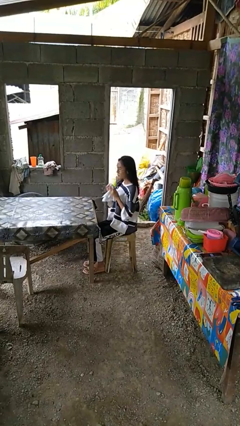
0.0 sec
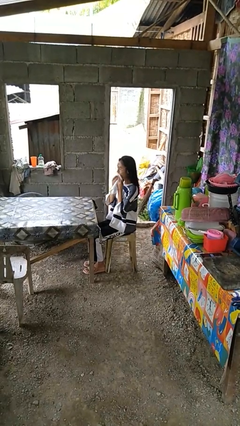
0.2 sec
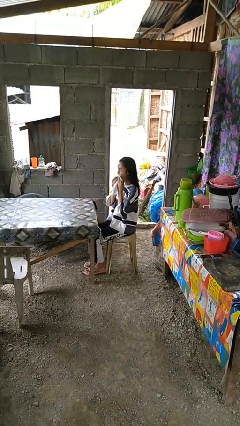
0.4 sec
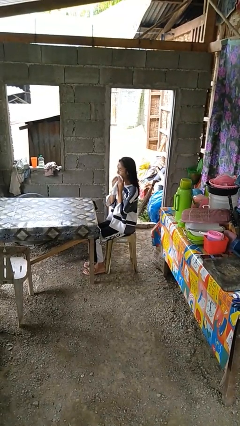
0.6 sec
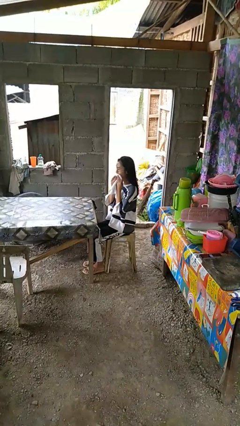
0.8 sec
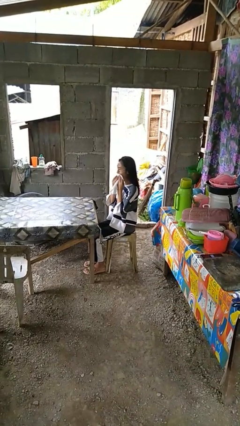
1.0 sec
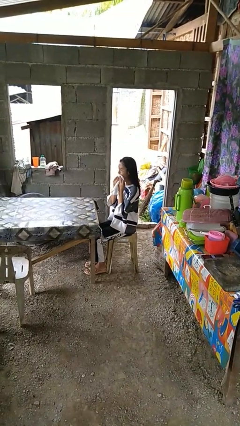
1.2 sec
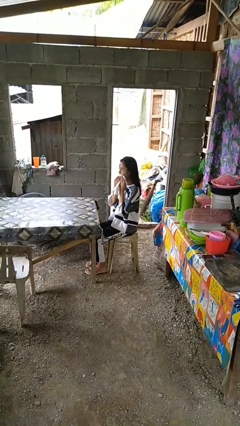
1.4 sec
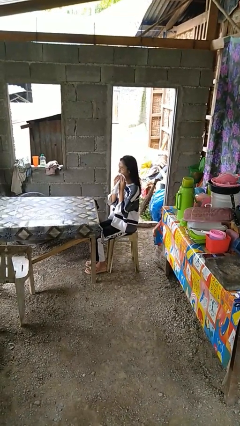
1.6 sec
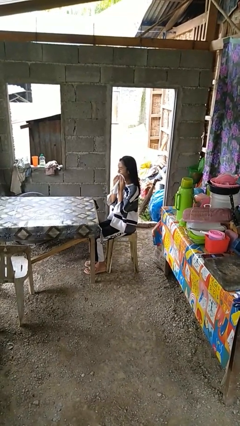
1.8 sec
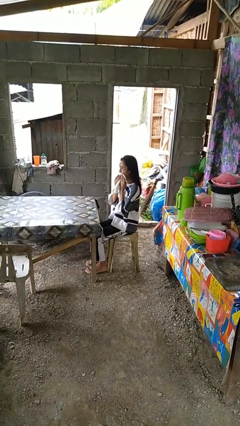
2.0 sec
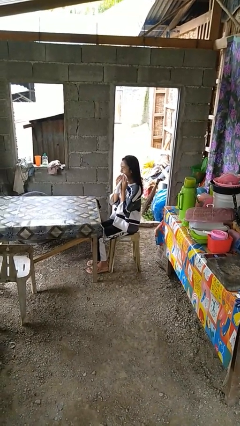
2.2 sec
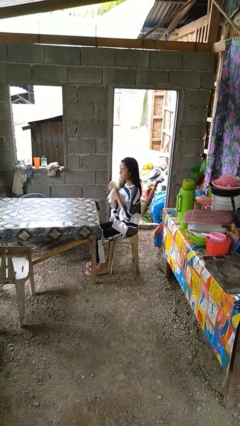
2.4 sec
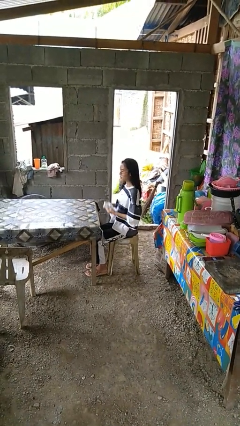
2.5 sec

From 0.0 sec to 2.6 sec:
person wipes mouth with napkin

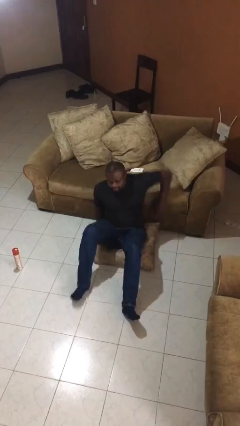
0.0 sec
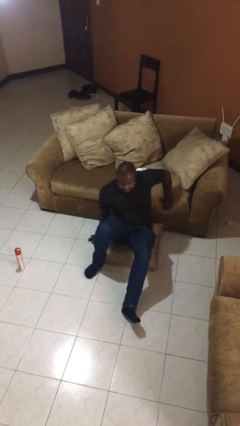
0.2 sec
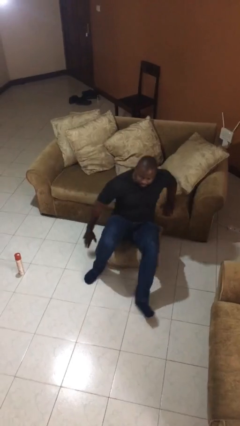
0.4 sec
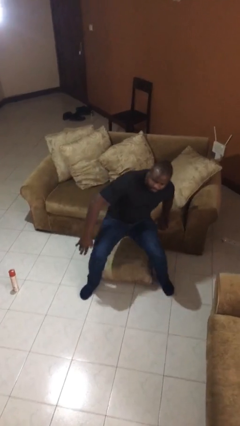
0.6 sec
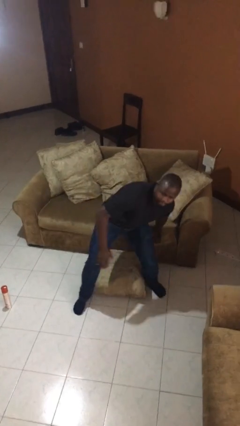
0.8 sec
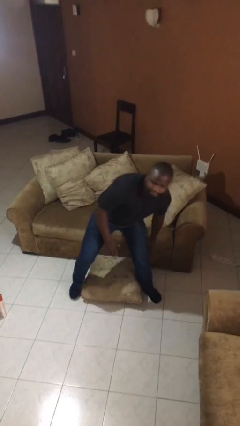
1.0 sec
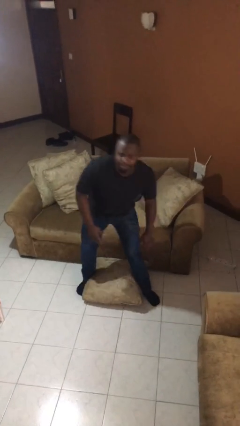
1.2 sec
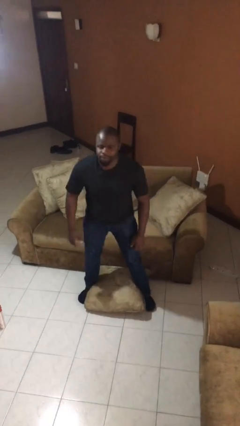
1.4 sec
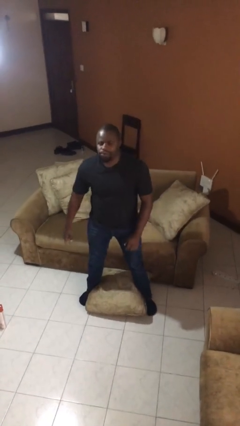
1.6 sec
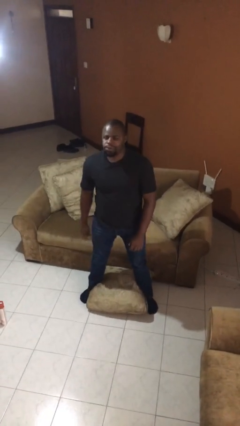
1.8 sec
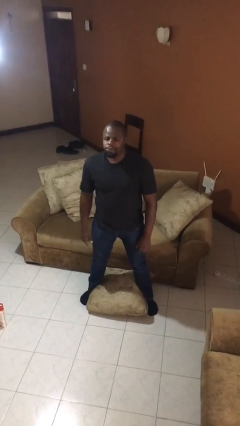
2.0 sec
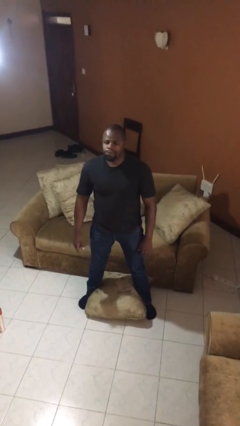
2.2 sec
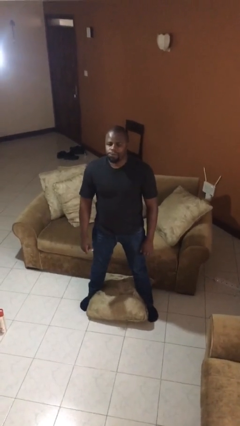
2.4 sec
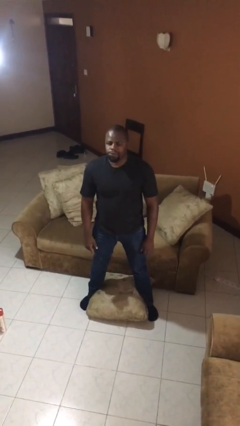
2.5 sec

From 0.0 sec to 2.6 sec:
person stands up from floor

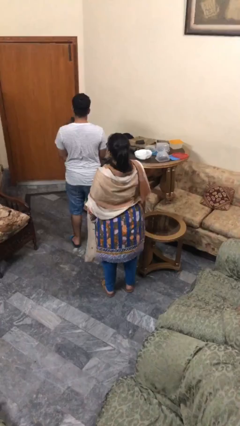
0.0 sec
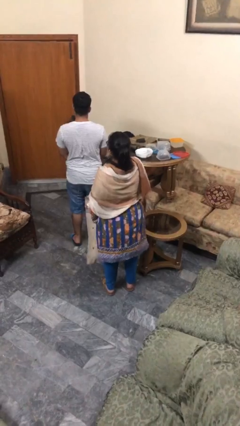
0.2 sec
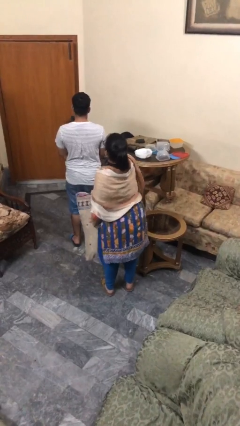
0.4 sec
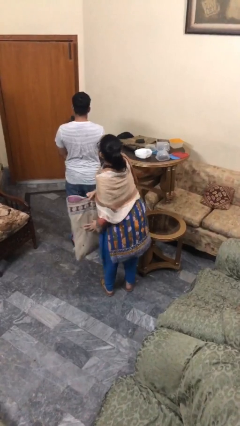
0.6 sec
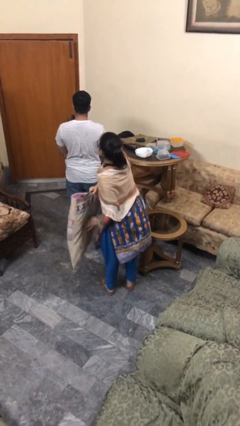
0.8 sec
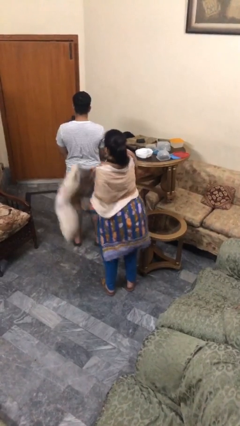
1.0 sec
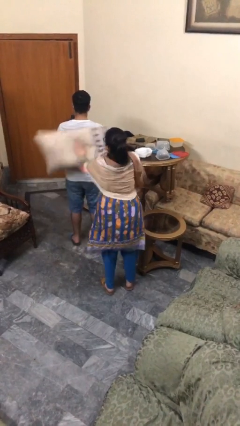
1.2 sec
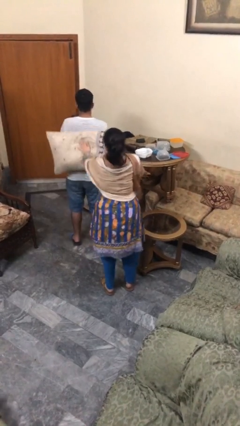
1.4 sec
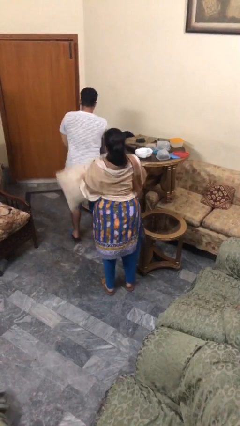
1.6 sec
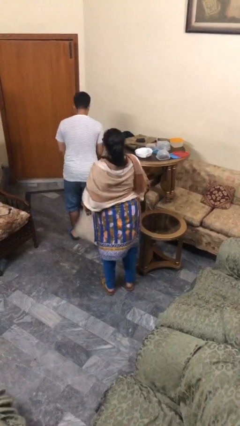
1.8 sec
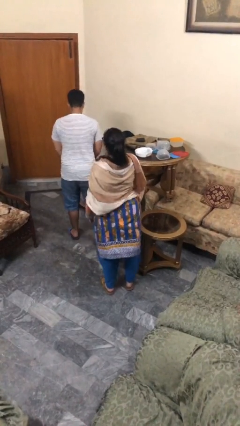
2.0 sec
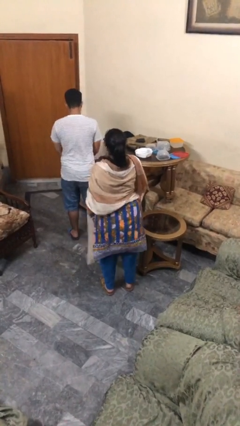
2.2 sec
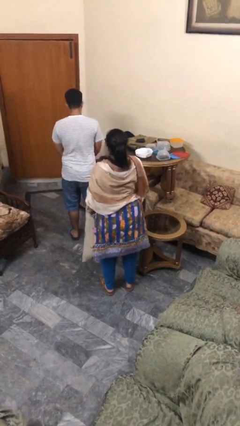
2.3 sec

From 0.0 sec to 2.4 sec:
person hits person with pillow

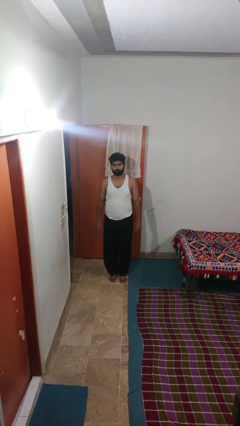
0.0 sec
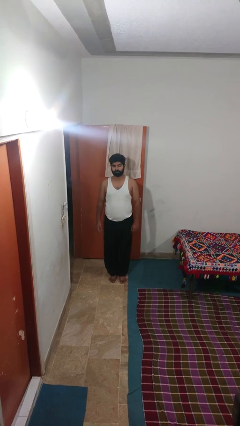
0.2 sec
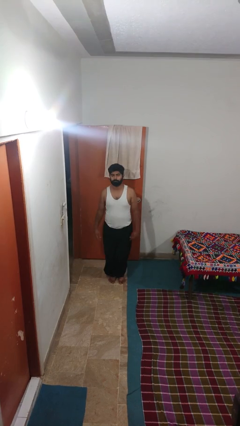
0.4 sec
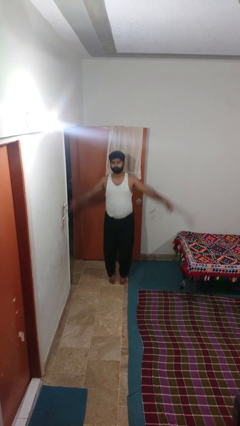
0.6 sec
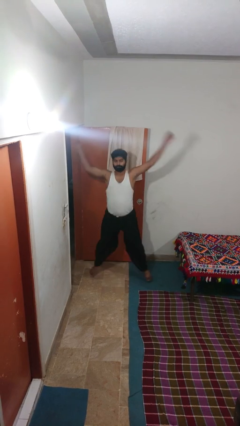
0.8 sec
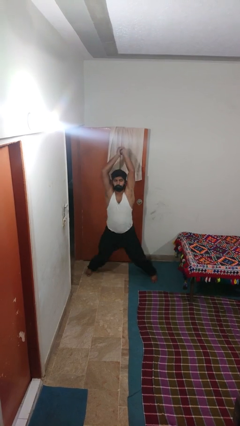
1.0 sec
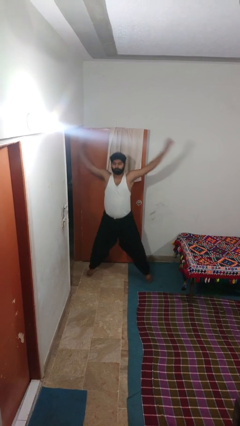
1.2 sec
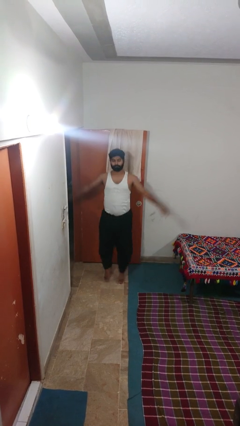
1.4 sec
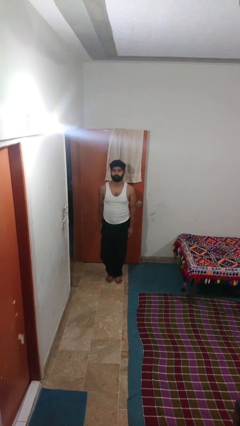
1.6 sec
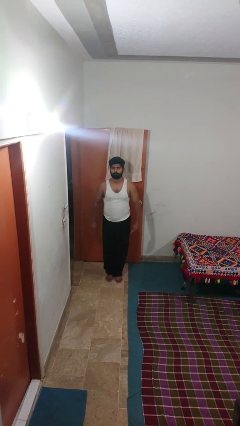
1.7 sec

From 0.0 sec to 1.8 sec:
person exercises with jumping jacks

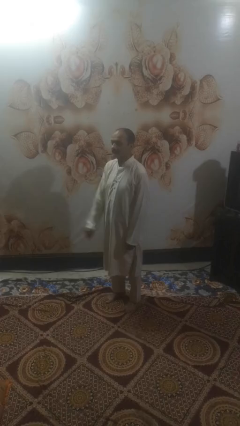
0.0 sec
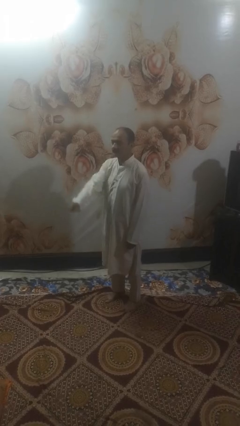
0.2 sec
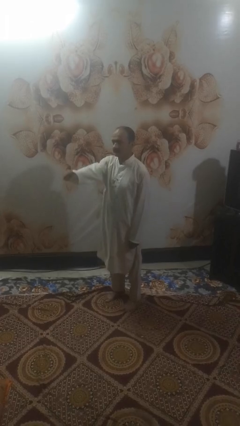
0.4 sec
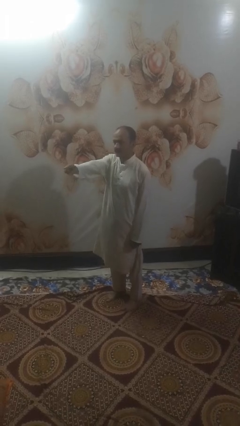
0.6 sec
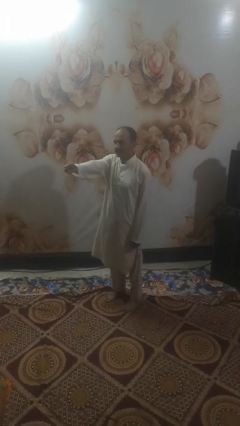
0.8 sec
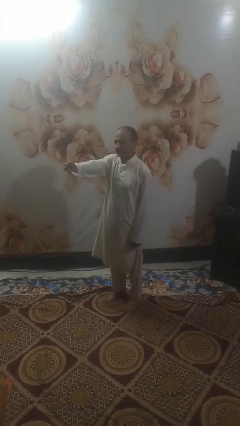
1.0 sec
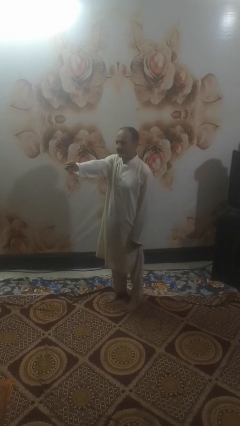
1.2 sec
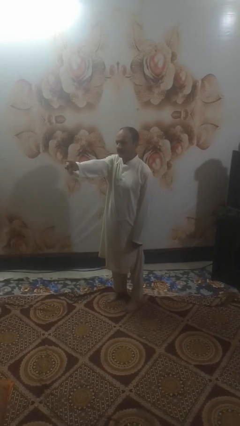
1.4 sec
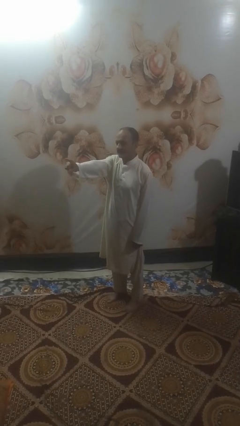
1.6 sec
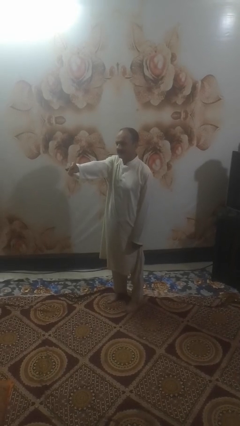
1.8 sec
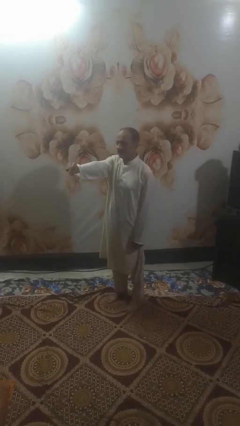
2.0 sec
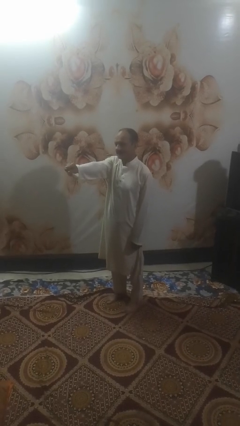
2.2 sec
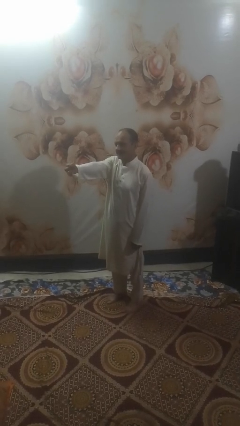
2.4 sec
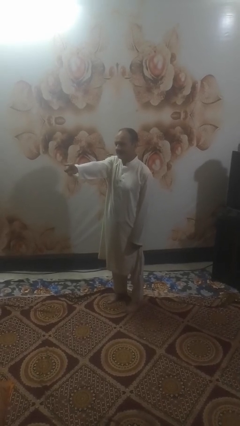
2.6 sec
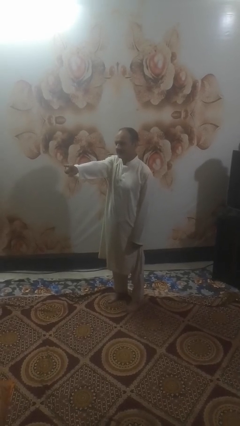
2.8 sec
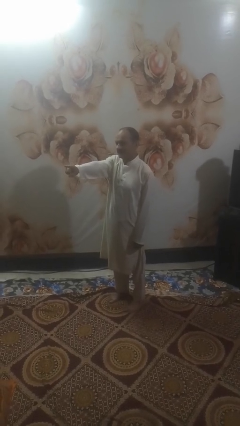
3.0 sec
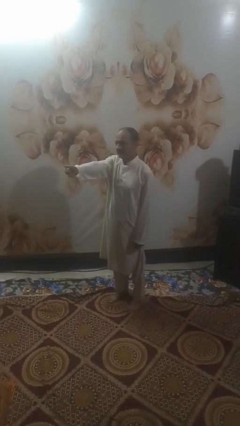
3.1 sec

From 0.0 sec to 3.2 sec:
person points at person

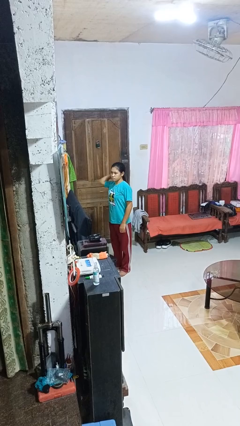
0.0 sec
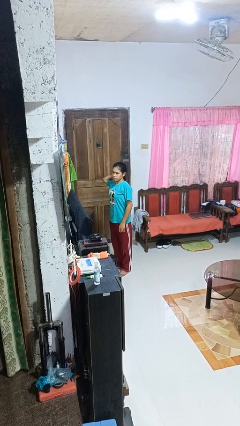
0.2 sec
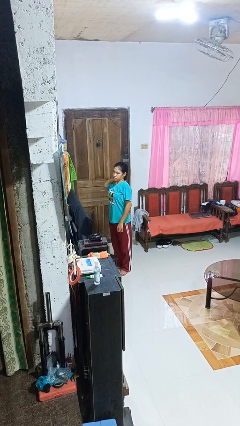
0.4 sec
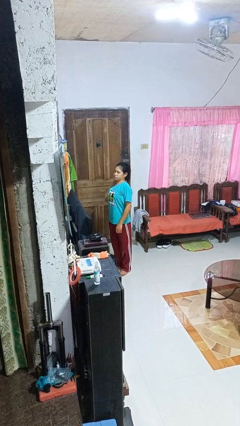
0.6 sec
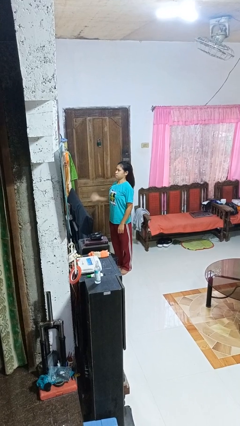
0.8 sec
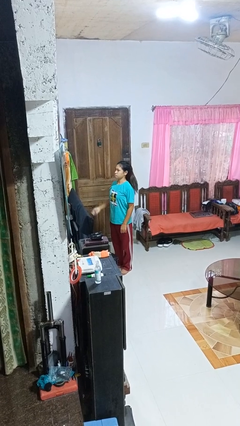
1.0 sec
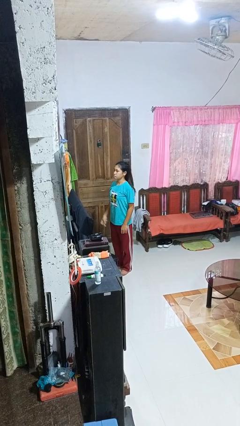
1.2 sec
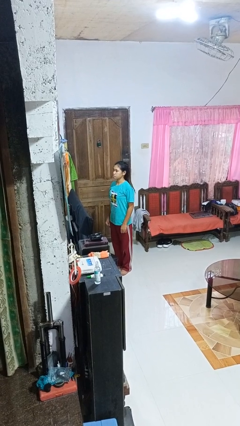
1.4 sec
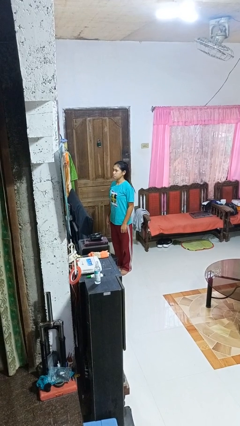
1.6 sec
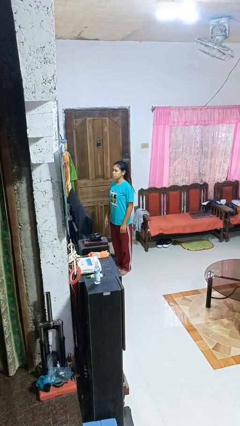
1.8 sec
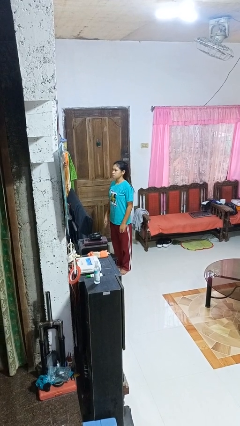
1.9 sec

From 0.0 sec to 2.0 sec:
person takes off hairtie

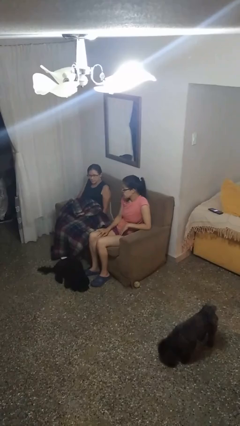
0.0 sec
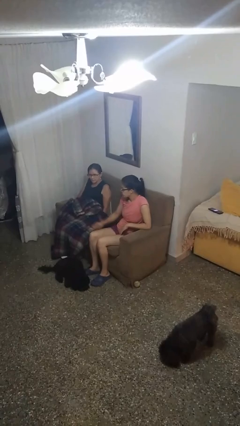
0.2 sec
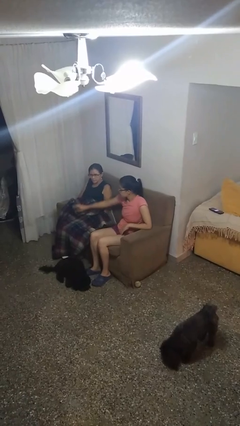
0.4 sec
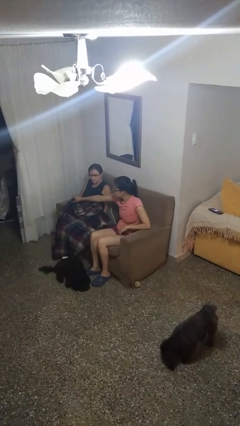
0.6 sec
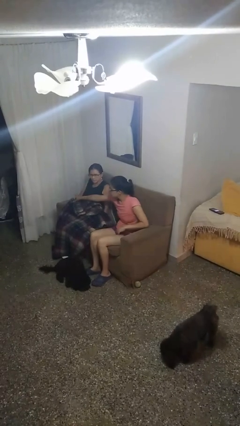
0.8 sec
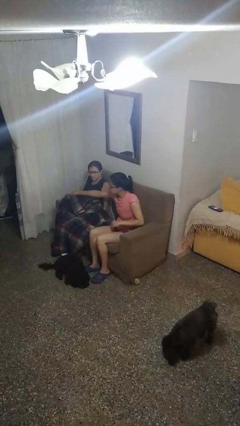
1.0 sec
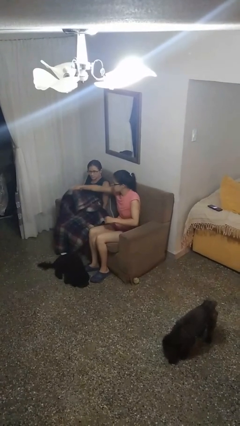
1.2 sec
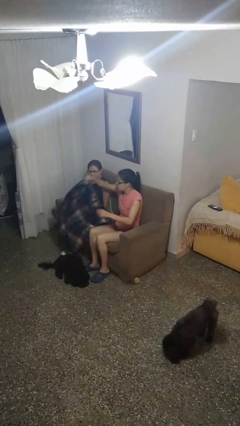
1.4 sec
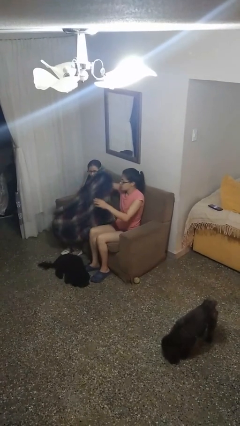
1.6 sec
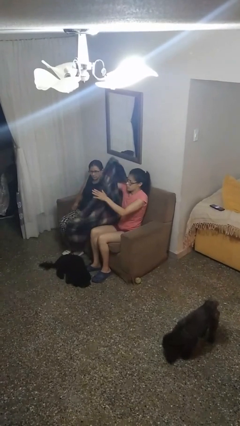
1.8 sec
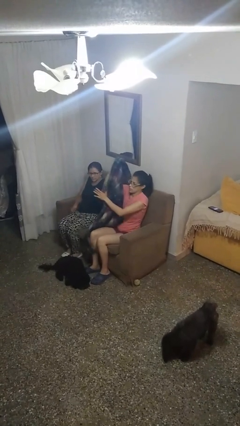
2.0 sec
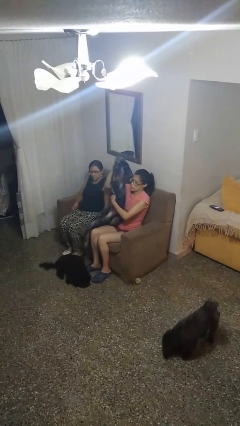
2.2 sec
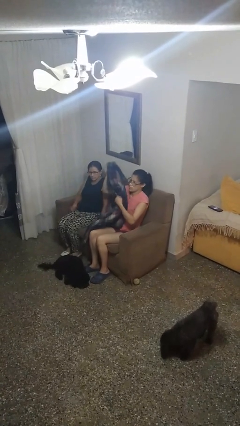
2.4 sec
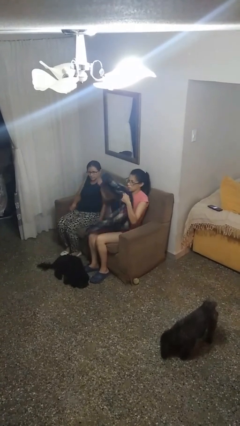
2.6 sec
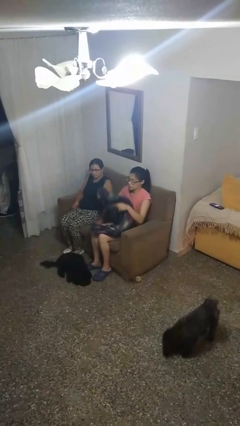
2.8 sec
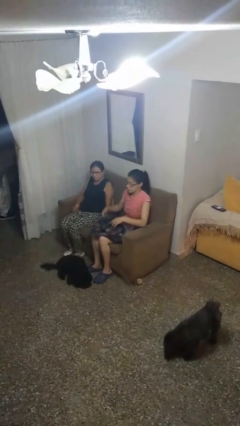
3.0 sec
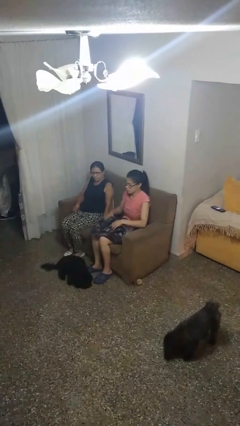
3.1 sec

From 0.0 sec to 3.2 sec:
person uncovers friend with blanket
